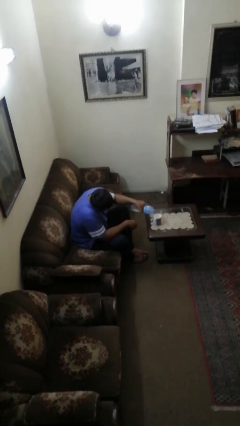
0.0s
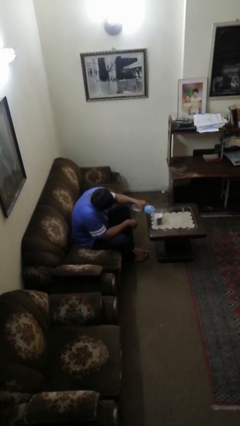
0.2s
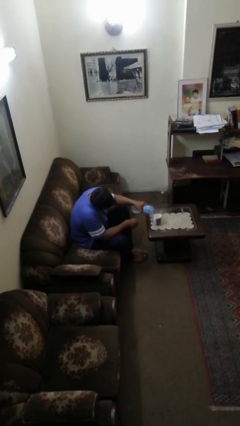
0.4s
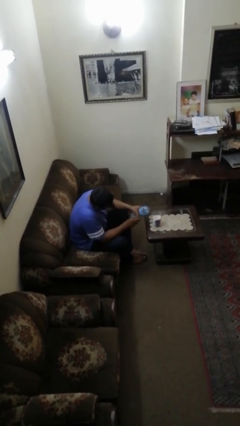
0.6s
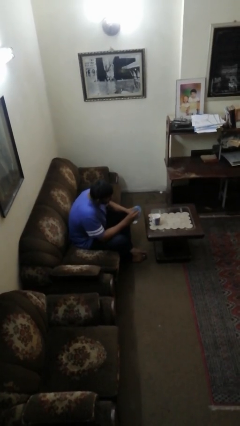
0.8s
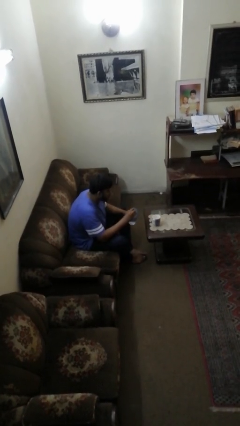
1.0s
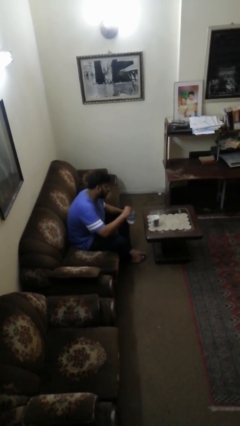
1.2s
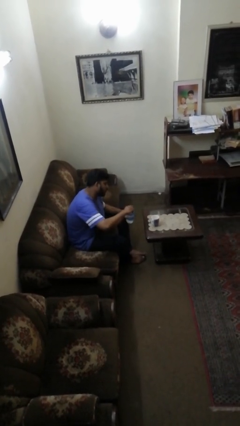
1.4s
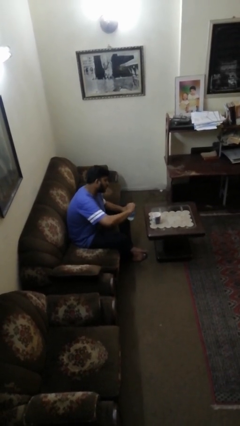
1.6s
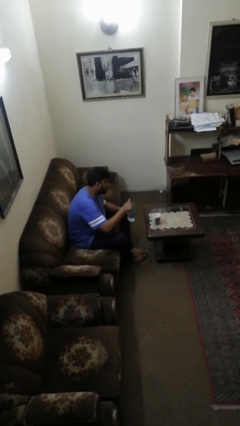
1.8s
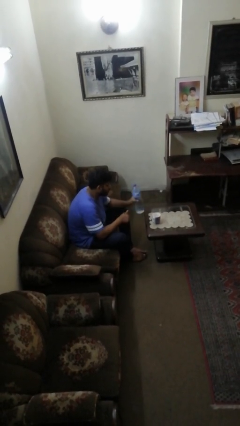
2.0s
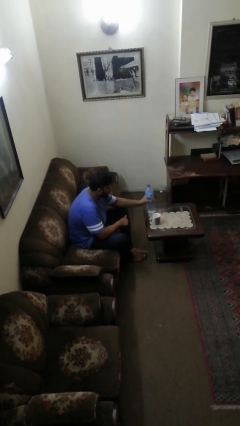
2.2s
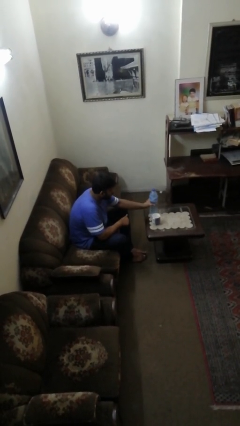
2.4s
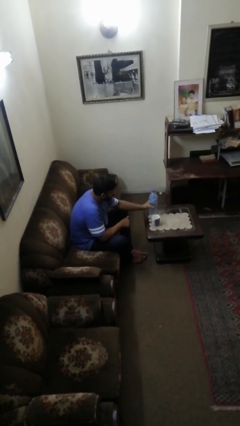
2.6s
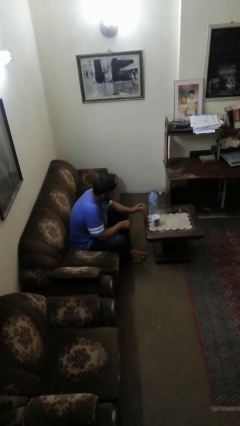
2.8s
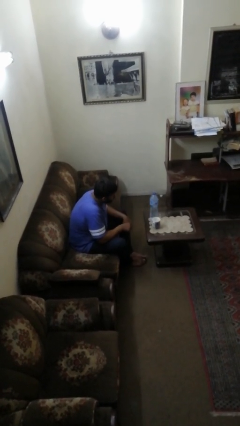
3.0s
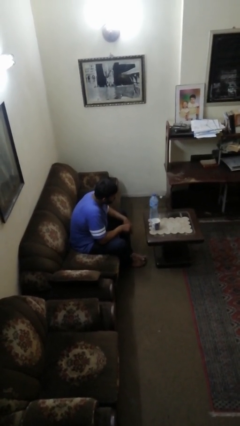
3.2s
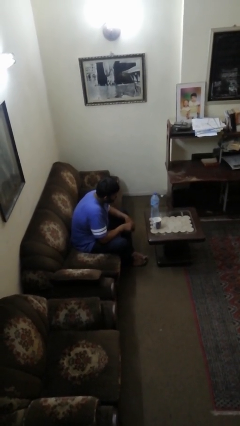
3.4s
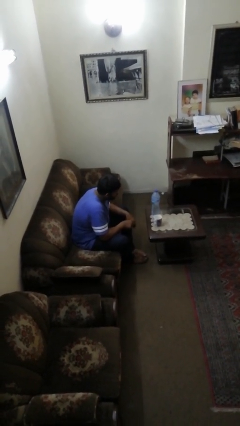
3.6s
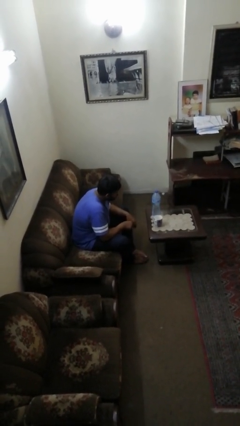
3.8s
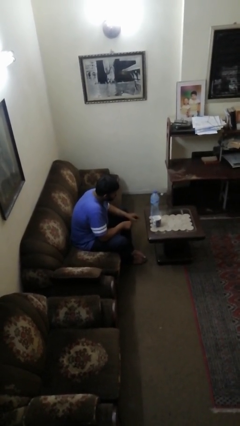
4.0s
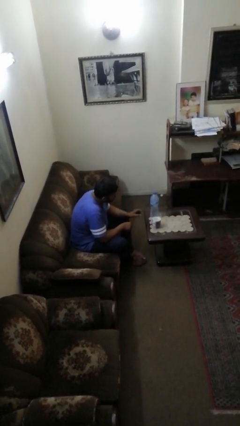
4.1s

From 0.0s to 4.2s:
person screws lid to bottle

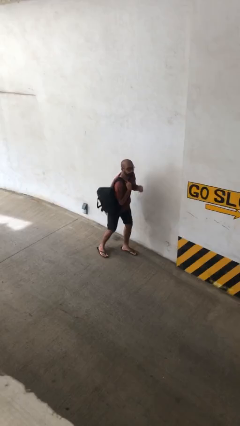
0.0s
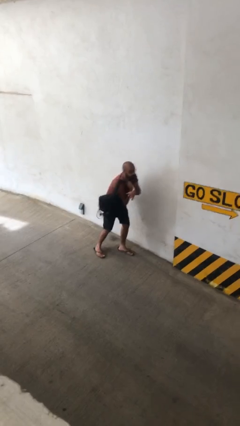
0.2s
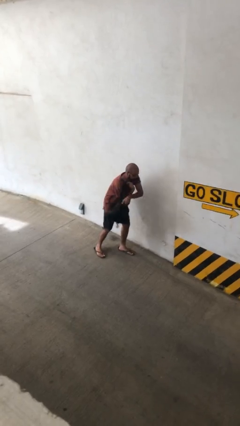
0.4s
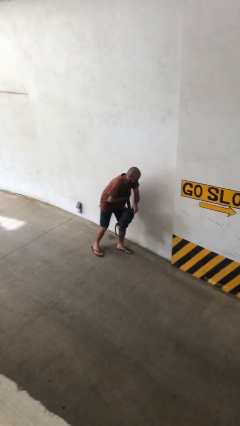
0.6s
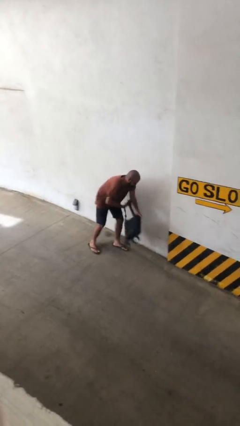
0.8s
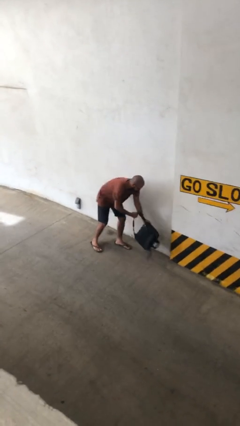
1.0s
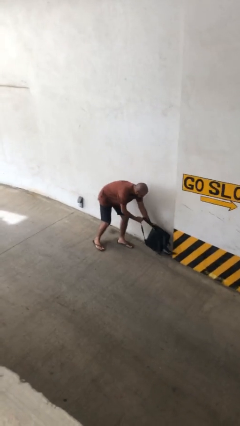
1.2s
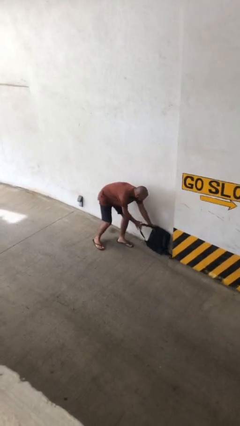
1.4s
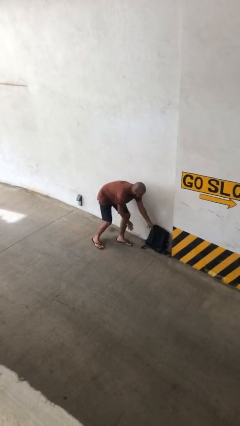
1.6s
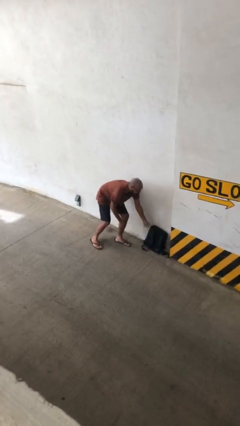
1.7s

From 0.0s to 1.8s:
person puts down object on floor

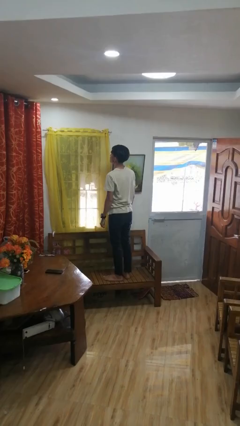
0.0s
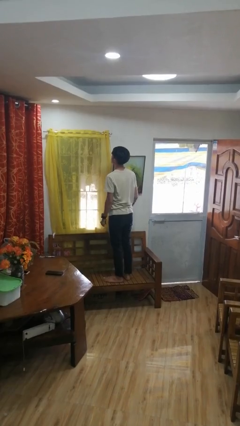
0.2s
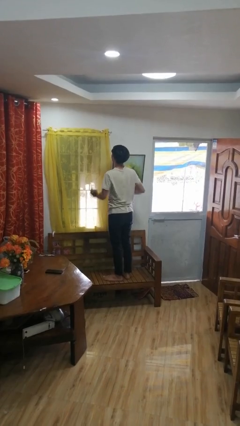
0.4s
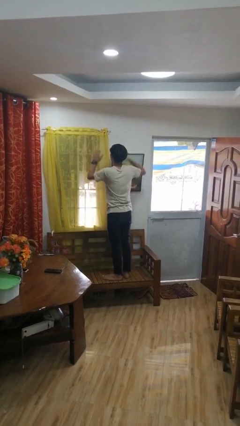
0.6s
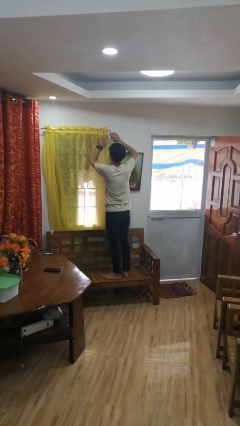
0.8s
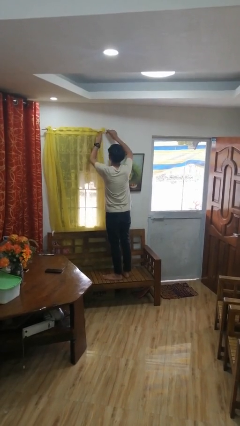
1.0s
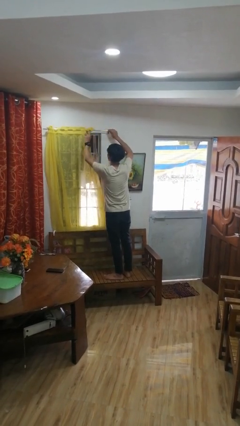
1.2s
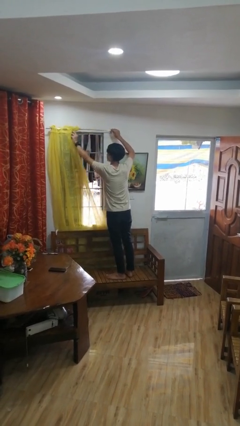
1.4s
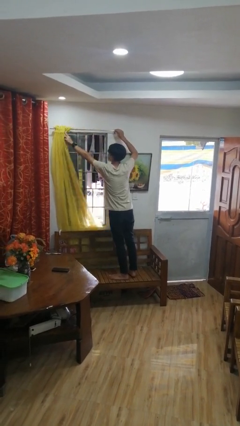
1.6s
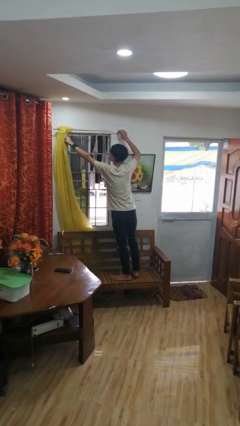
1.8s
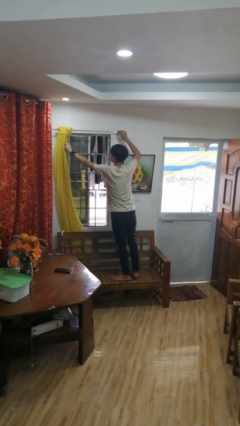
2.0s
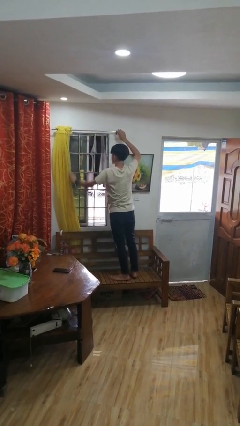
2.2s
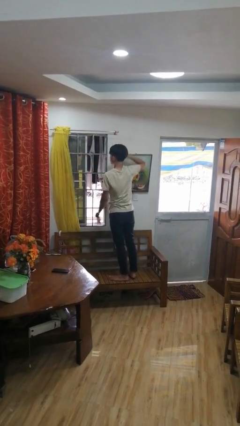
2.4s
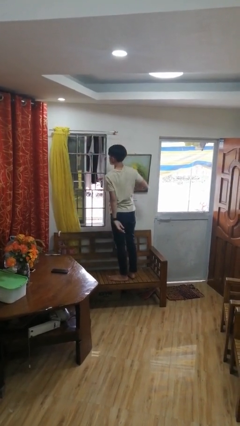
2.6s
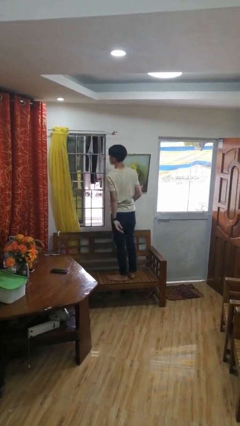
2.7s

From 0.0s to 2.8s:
person opens curtains

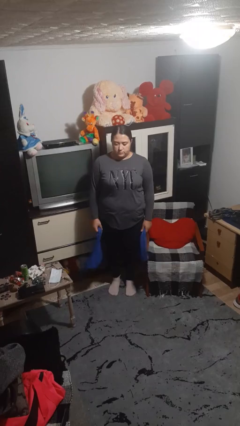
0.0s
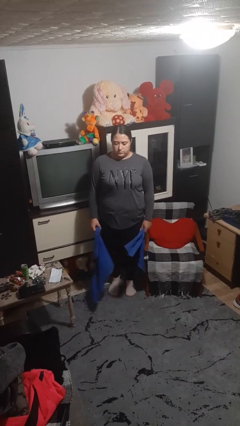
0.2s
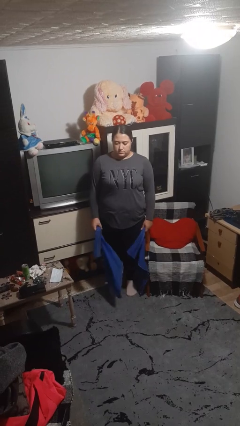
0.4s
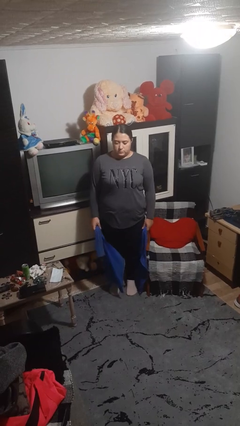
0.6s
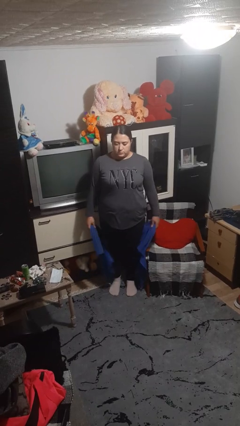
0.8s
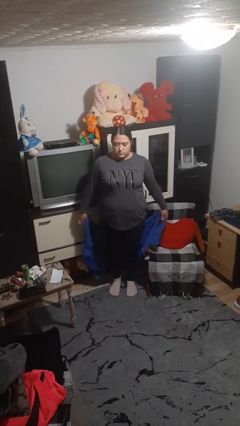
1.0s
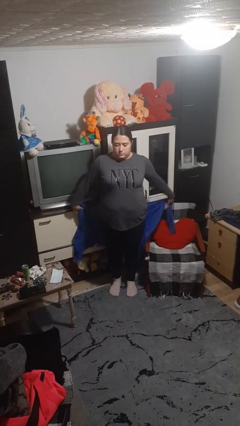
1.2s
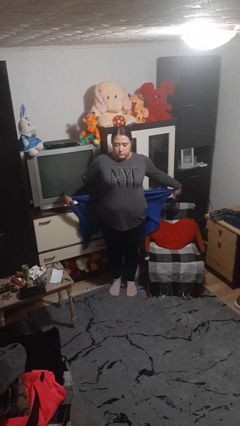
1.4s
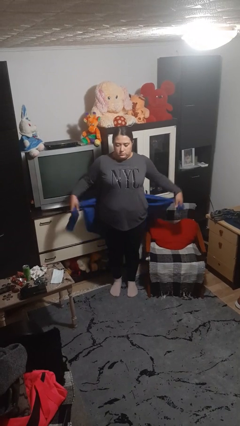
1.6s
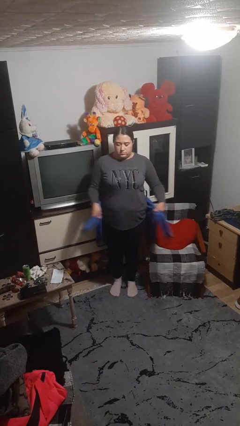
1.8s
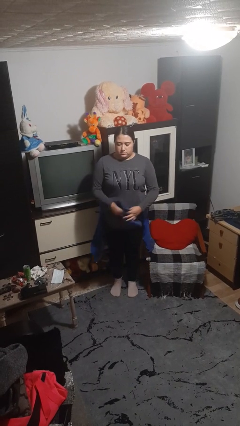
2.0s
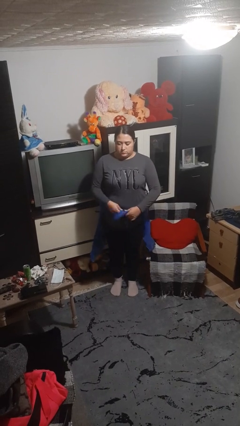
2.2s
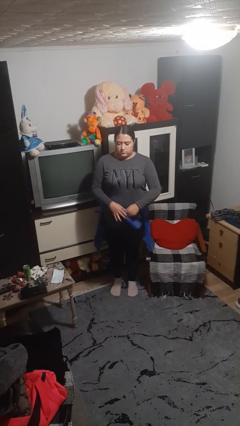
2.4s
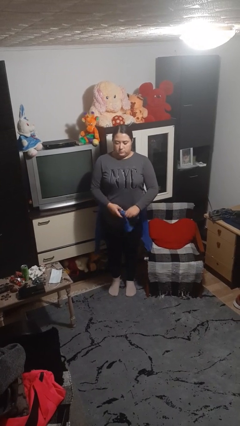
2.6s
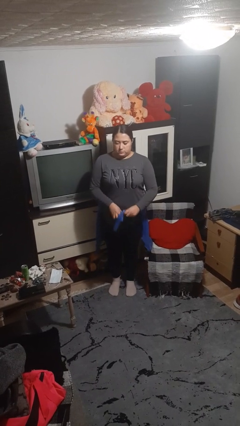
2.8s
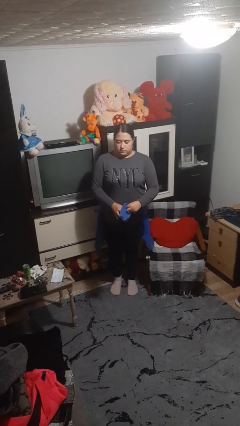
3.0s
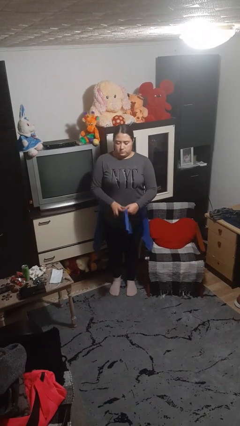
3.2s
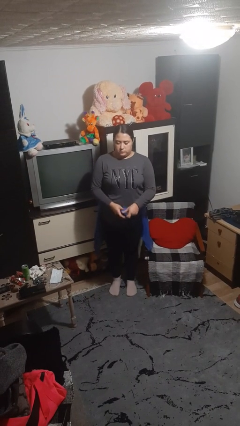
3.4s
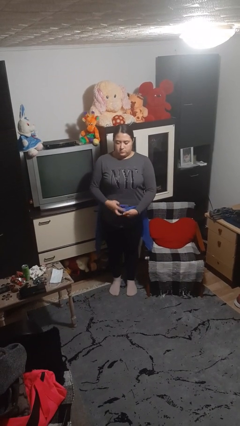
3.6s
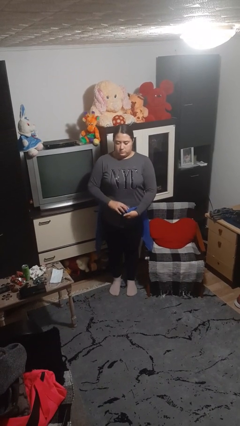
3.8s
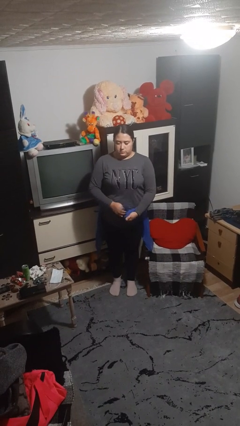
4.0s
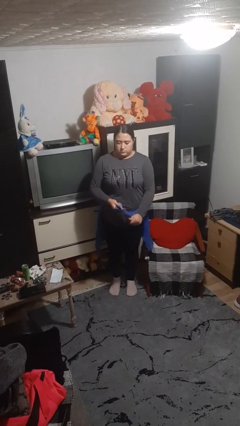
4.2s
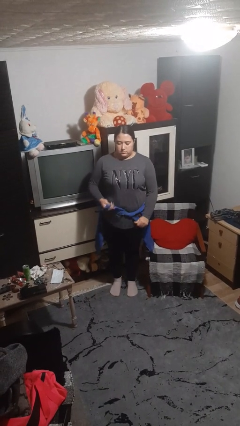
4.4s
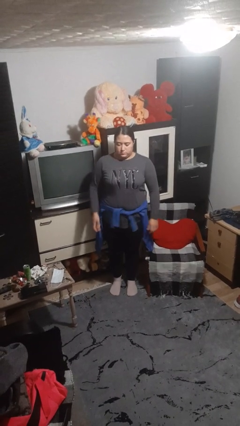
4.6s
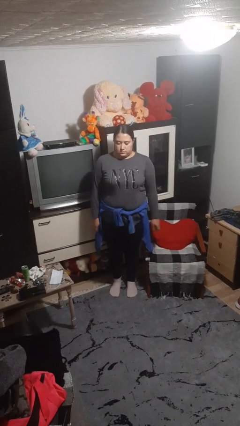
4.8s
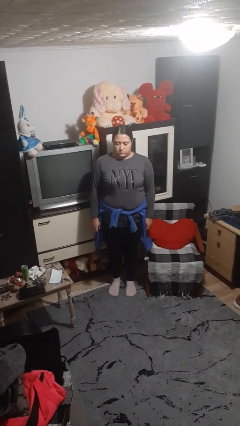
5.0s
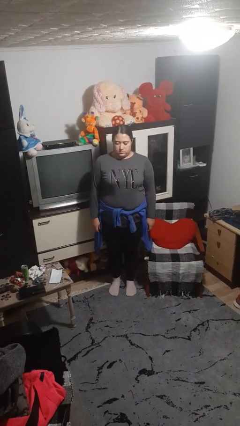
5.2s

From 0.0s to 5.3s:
person ties jacket around waist

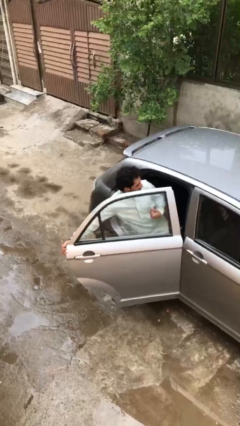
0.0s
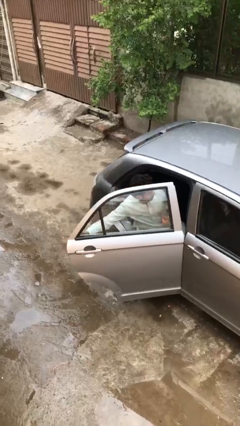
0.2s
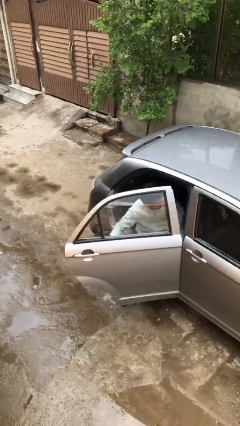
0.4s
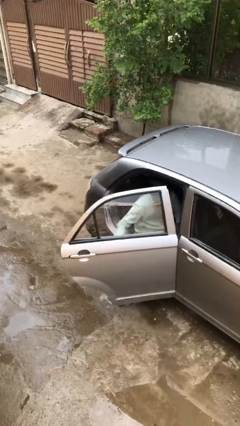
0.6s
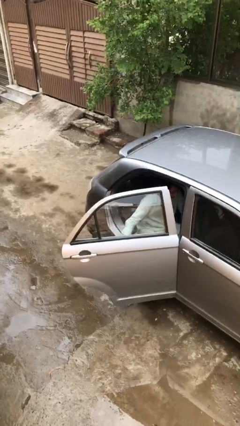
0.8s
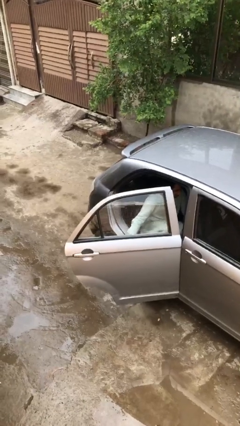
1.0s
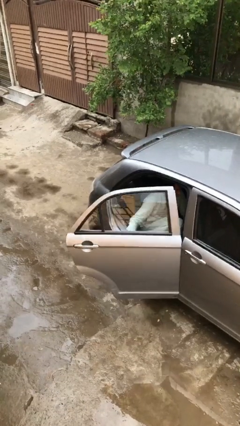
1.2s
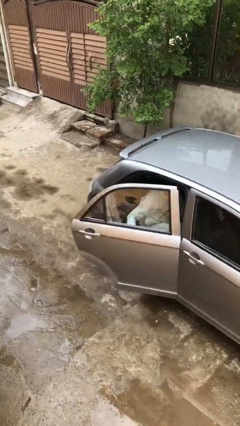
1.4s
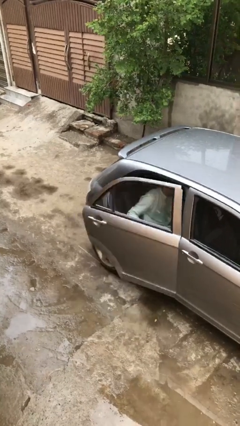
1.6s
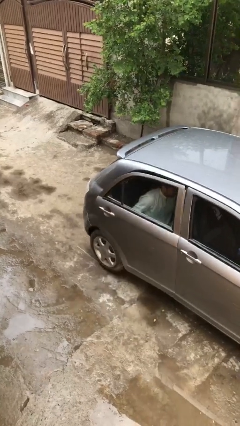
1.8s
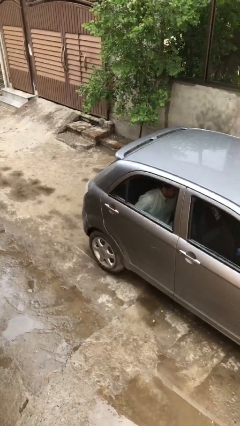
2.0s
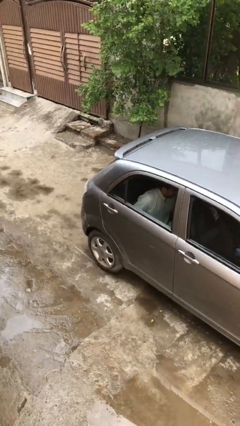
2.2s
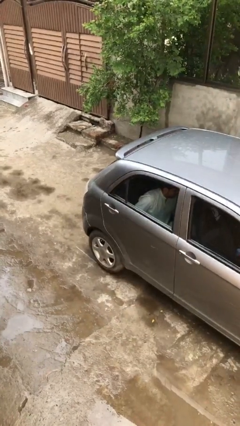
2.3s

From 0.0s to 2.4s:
person closes car door

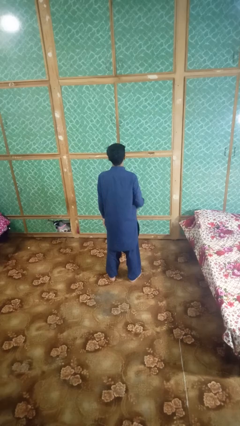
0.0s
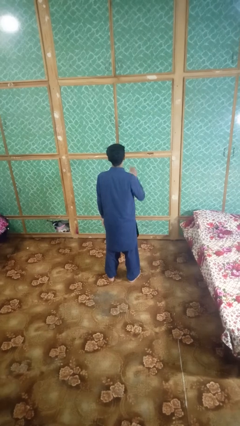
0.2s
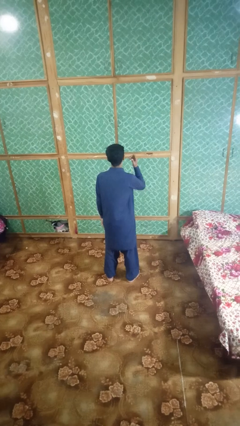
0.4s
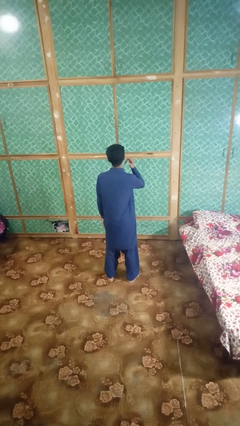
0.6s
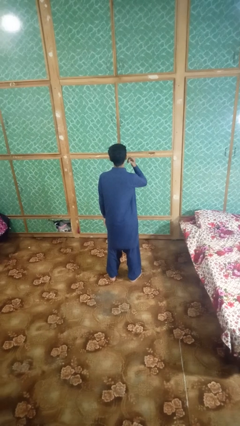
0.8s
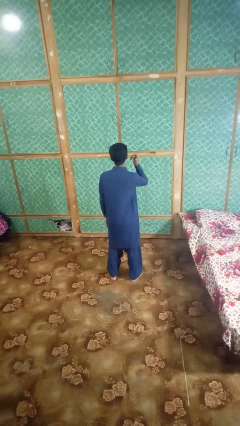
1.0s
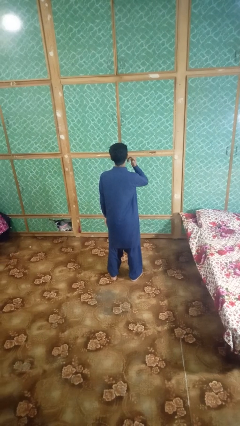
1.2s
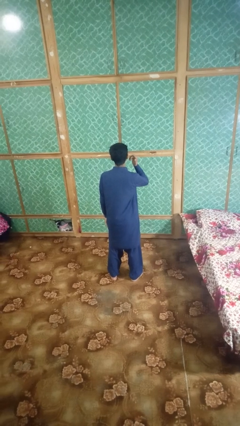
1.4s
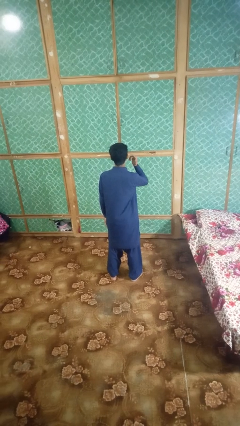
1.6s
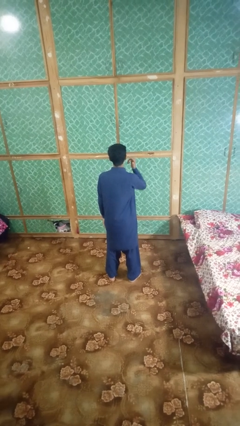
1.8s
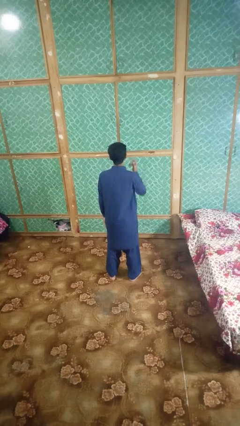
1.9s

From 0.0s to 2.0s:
person gestures listen closely
